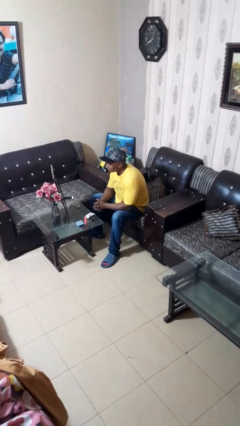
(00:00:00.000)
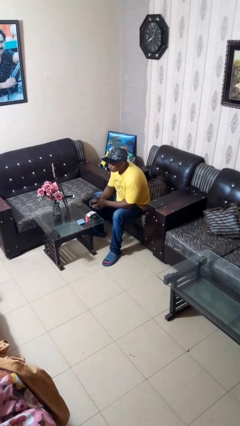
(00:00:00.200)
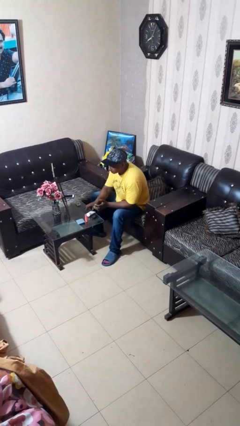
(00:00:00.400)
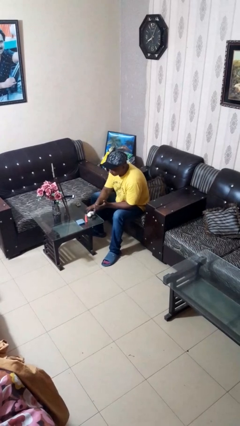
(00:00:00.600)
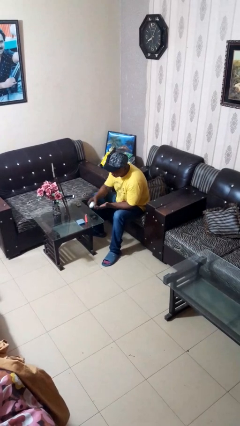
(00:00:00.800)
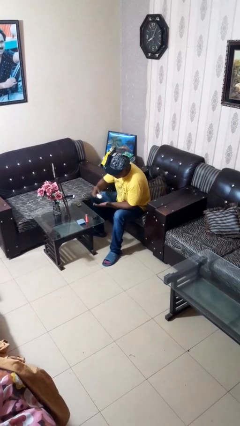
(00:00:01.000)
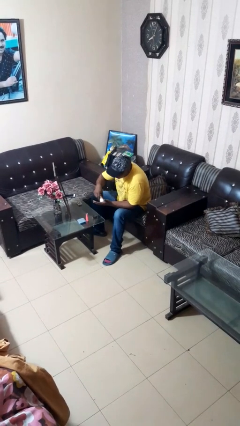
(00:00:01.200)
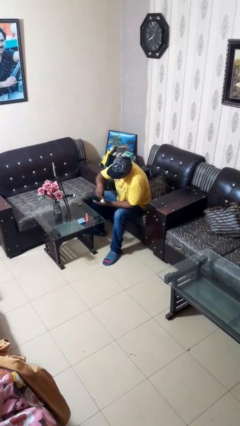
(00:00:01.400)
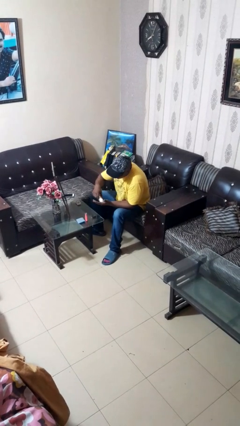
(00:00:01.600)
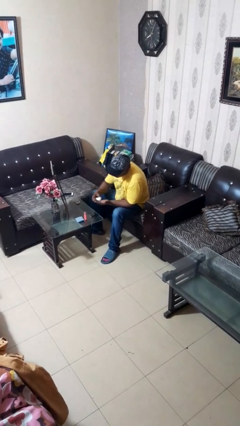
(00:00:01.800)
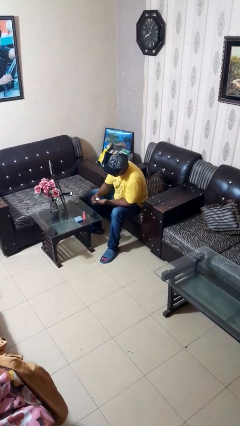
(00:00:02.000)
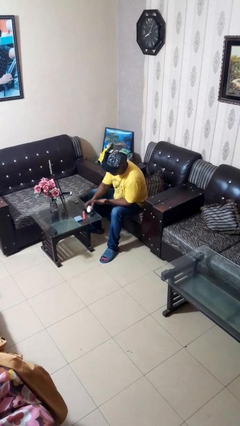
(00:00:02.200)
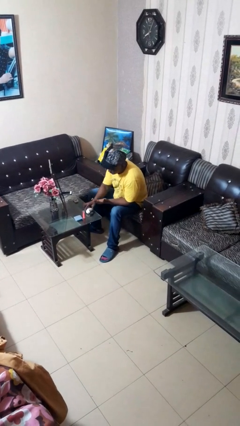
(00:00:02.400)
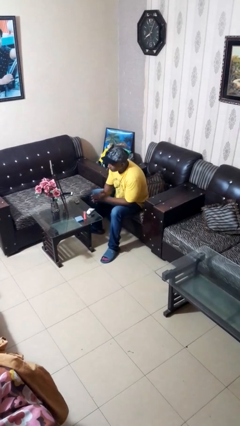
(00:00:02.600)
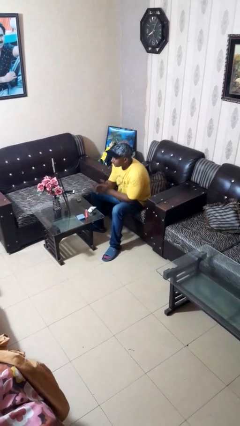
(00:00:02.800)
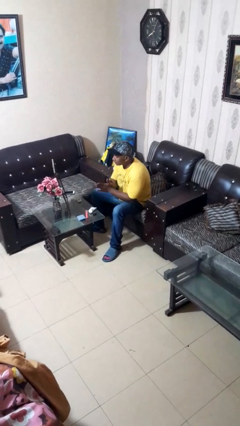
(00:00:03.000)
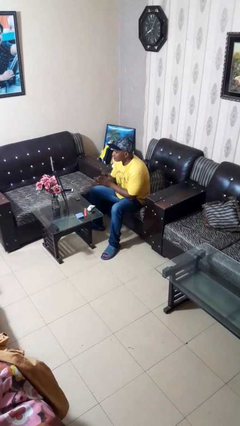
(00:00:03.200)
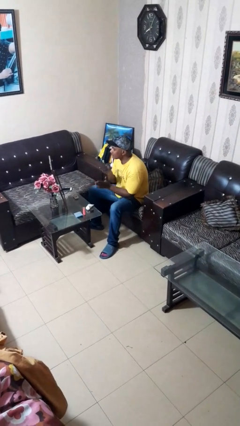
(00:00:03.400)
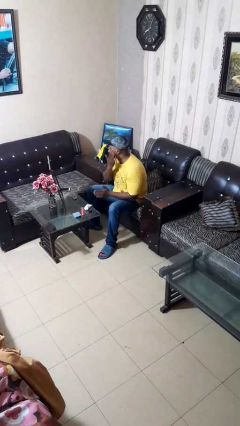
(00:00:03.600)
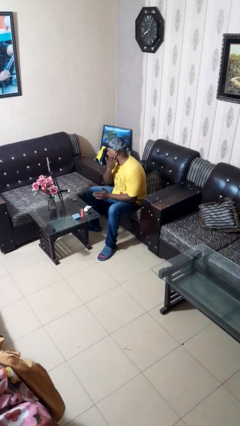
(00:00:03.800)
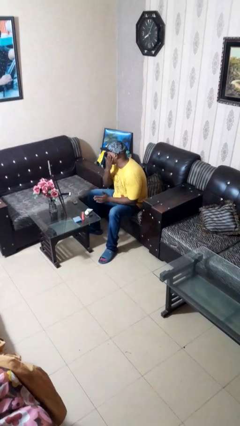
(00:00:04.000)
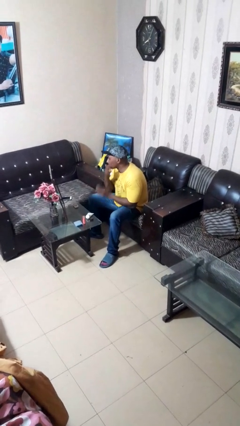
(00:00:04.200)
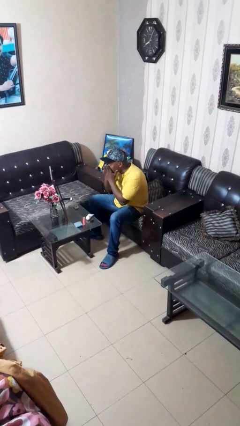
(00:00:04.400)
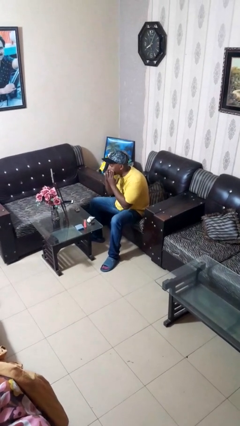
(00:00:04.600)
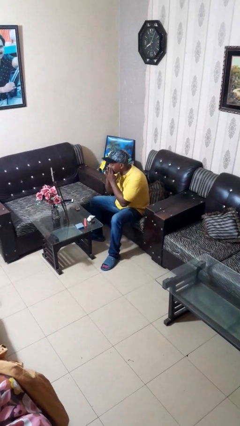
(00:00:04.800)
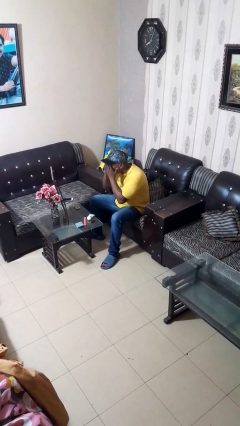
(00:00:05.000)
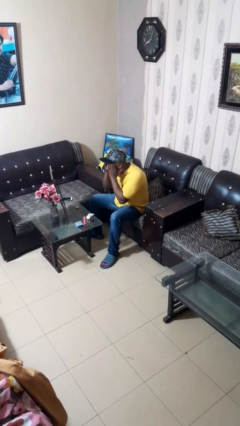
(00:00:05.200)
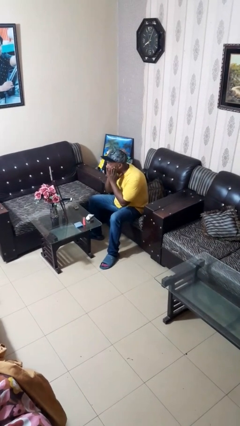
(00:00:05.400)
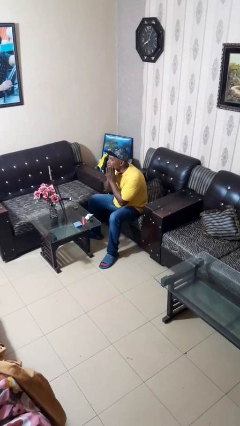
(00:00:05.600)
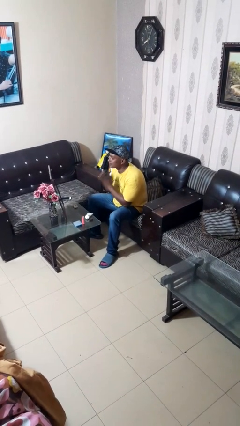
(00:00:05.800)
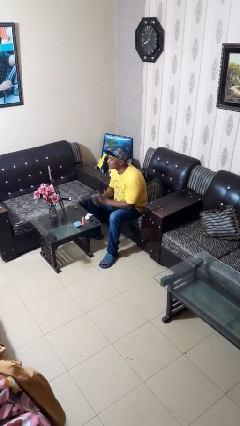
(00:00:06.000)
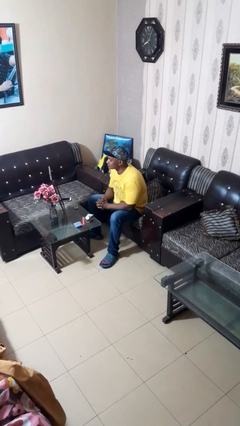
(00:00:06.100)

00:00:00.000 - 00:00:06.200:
person applies foundation makeup

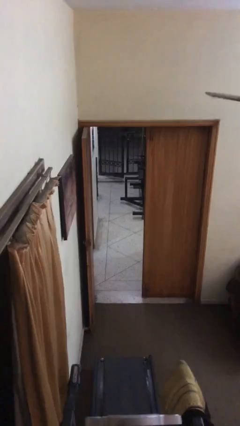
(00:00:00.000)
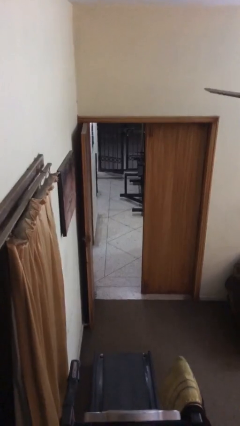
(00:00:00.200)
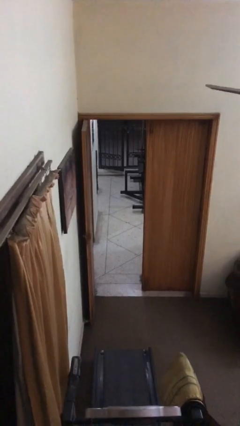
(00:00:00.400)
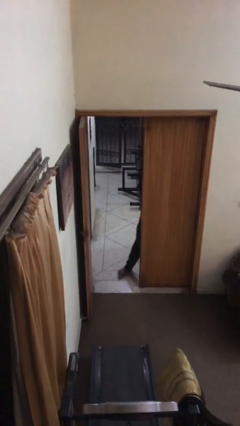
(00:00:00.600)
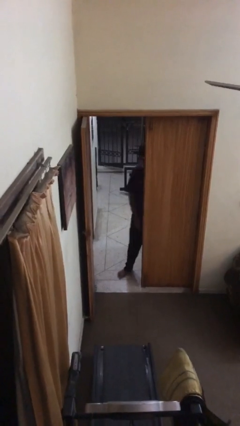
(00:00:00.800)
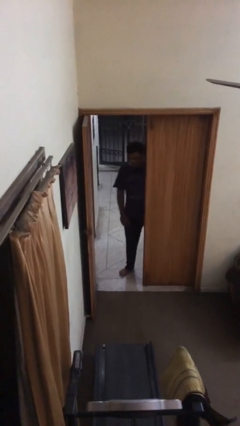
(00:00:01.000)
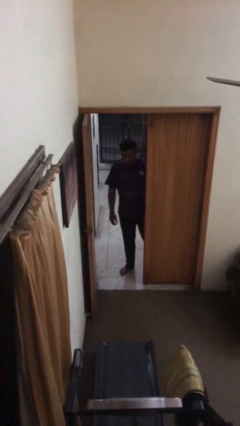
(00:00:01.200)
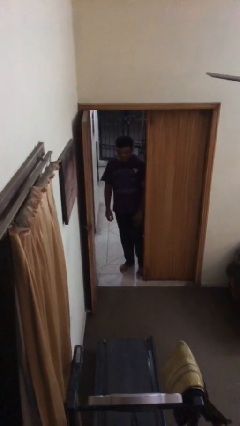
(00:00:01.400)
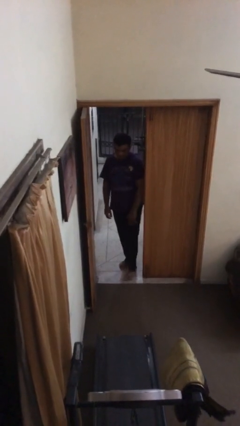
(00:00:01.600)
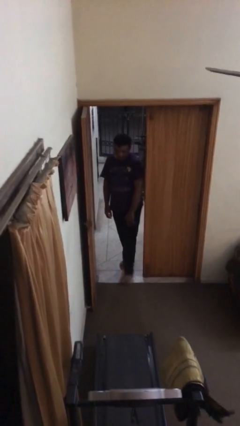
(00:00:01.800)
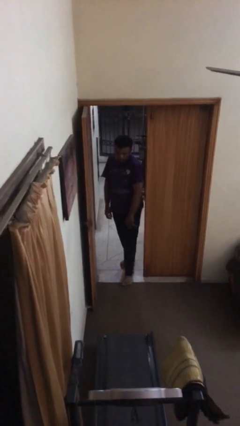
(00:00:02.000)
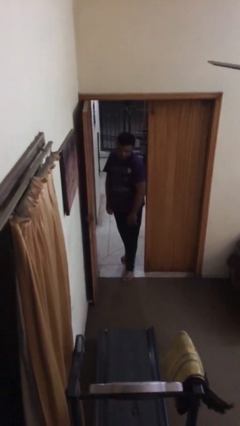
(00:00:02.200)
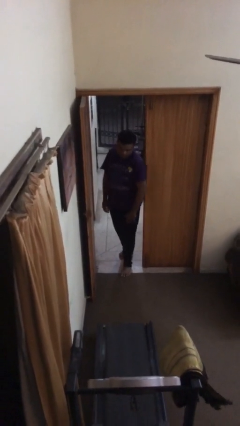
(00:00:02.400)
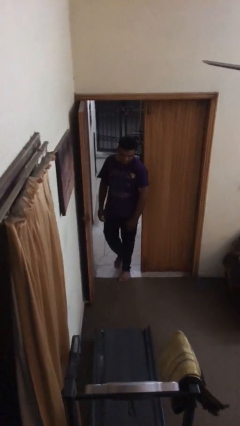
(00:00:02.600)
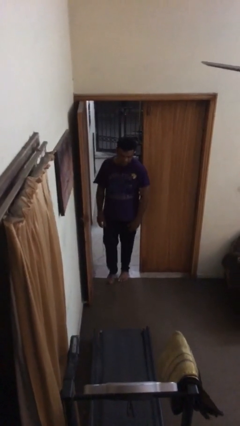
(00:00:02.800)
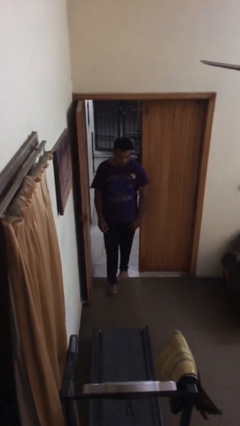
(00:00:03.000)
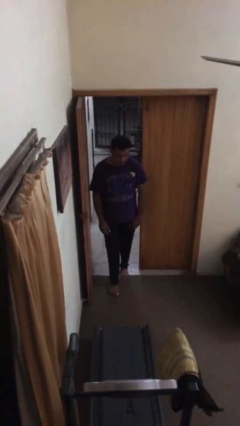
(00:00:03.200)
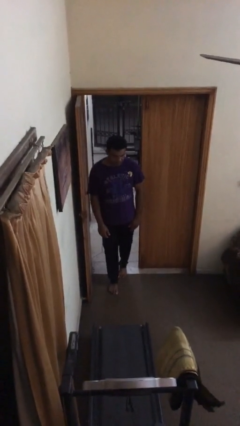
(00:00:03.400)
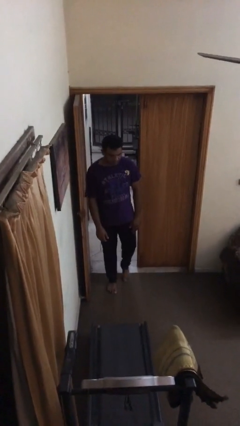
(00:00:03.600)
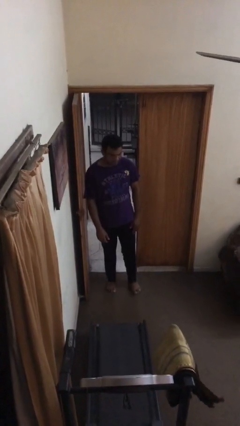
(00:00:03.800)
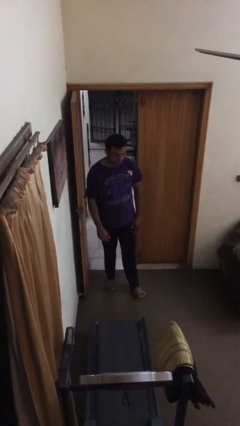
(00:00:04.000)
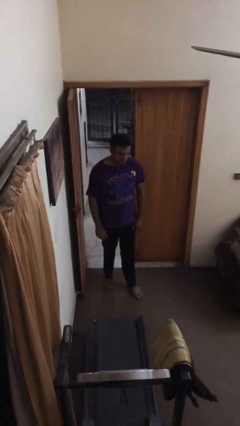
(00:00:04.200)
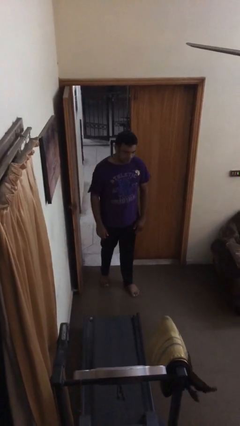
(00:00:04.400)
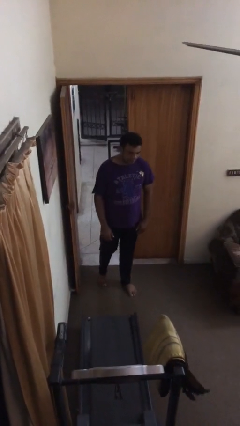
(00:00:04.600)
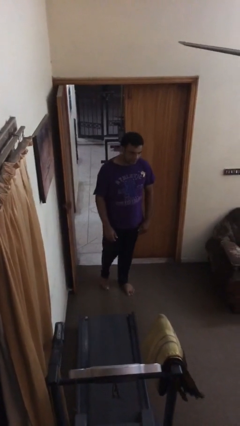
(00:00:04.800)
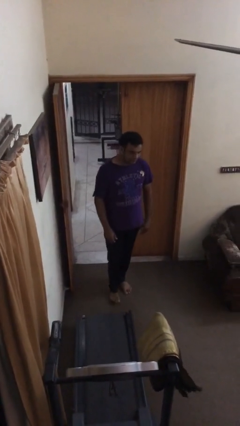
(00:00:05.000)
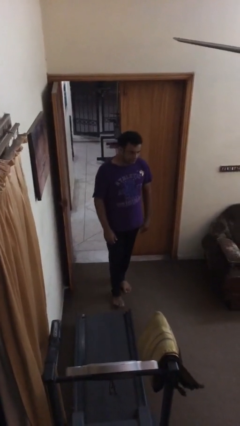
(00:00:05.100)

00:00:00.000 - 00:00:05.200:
person enters scene through structure

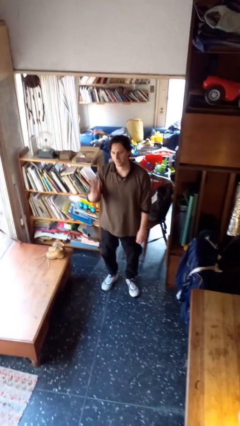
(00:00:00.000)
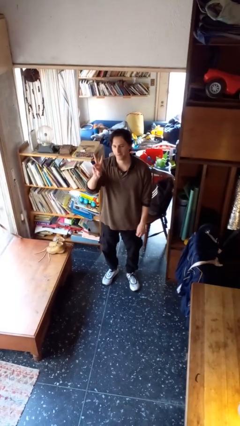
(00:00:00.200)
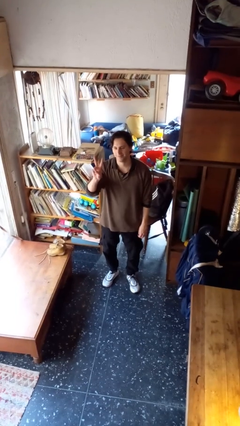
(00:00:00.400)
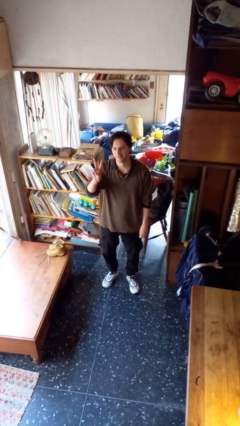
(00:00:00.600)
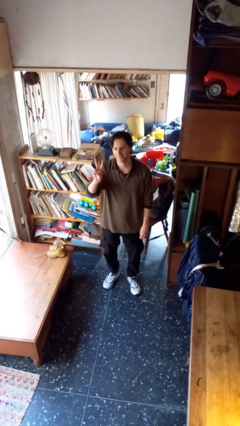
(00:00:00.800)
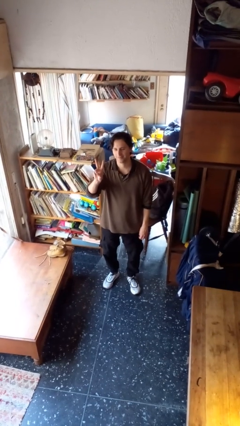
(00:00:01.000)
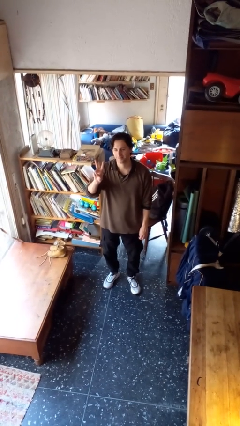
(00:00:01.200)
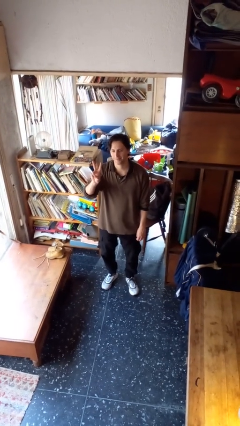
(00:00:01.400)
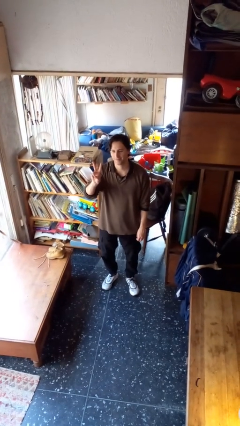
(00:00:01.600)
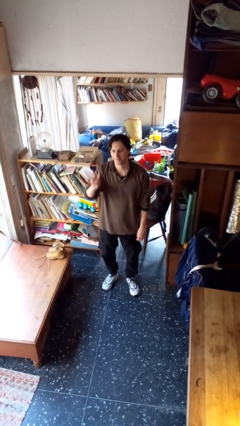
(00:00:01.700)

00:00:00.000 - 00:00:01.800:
person gestures peace

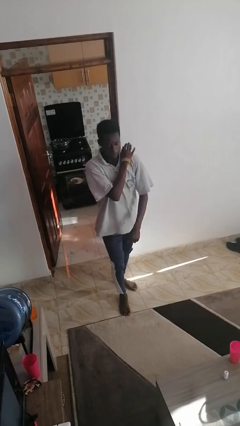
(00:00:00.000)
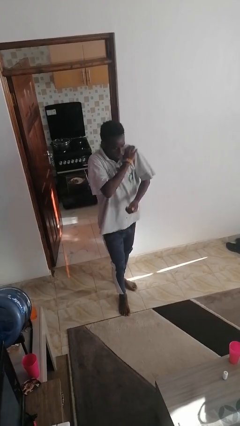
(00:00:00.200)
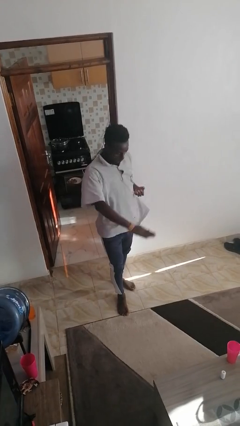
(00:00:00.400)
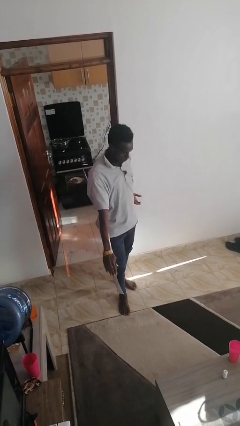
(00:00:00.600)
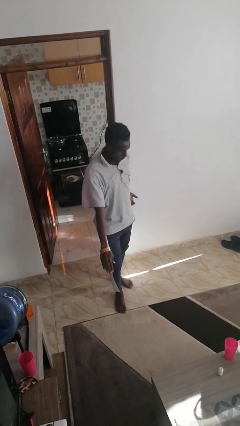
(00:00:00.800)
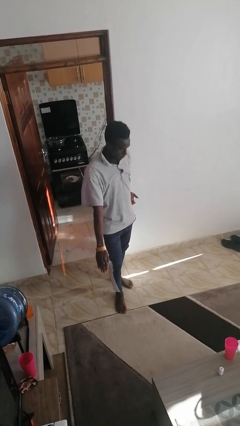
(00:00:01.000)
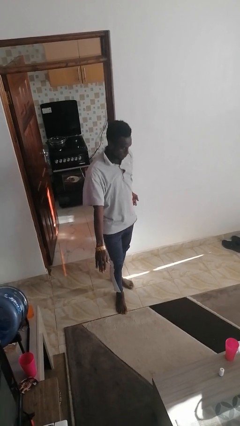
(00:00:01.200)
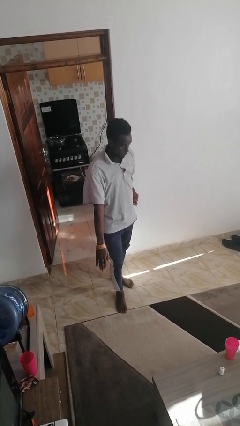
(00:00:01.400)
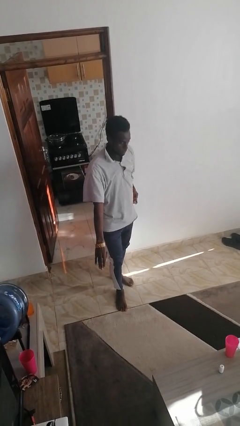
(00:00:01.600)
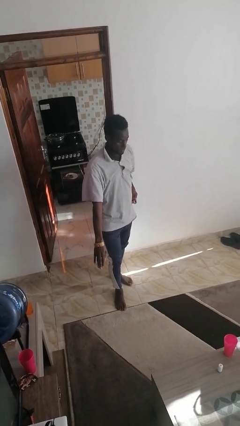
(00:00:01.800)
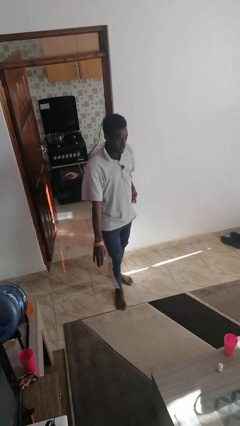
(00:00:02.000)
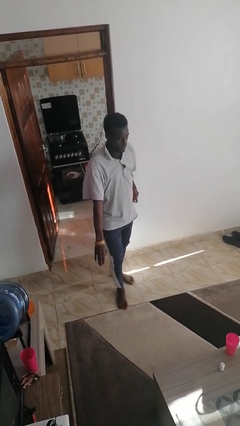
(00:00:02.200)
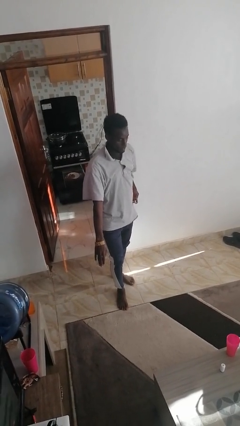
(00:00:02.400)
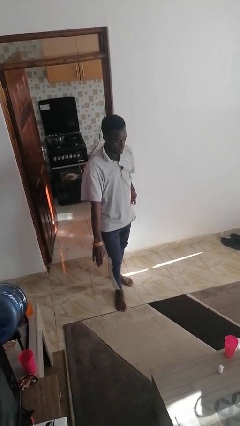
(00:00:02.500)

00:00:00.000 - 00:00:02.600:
person karate chop

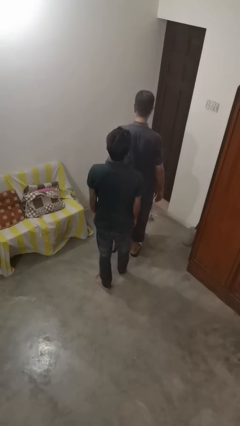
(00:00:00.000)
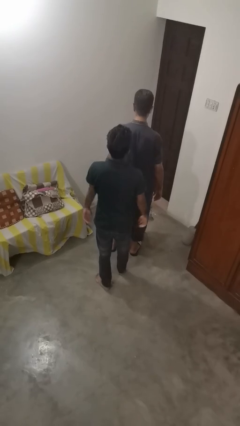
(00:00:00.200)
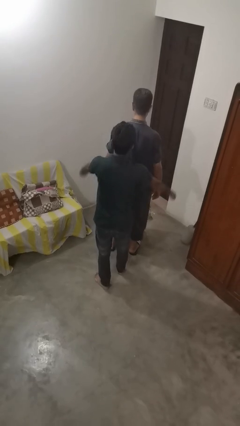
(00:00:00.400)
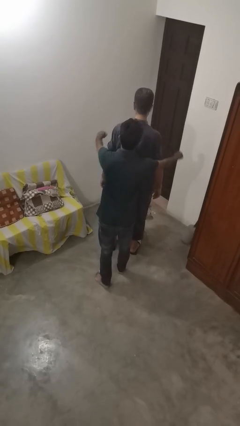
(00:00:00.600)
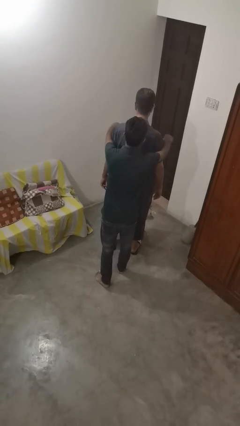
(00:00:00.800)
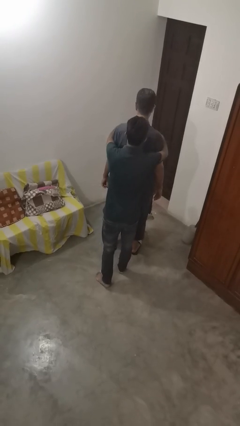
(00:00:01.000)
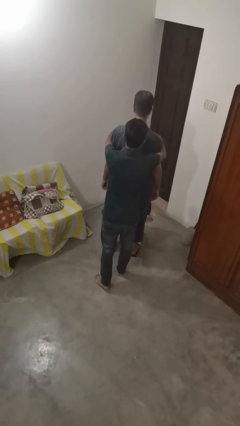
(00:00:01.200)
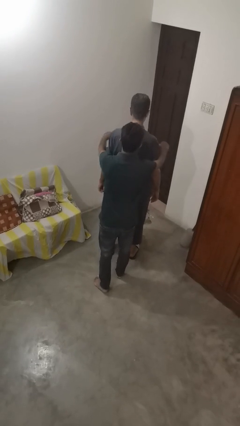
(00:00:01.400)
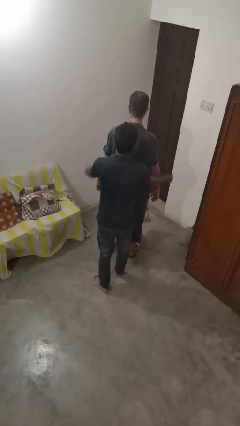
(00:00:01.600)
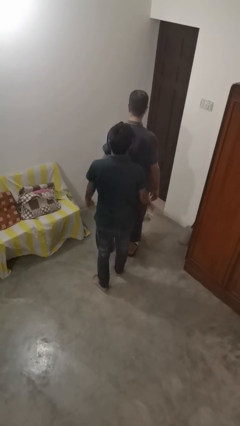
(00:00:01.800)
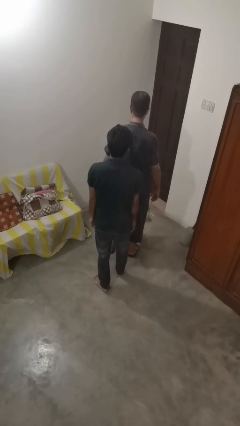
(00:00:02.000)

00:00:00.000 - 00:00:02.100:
person hugs person from behind
